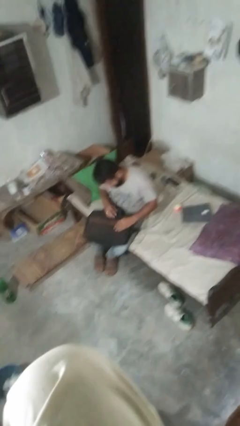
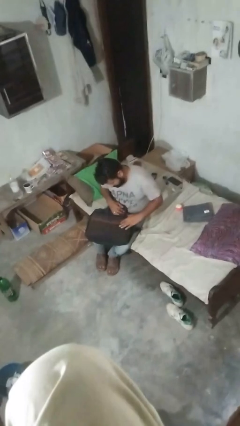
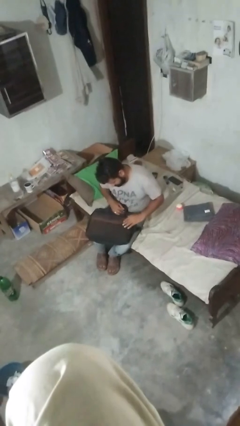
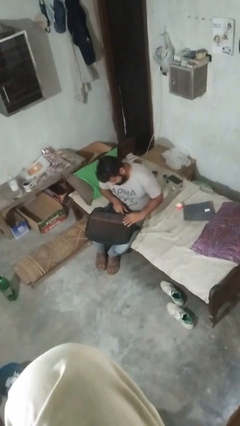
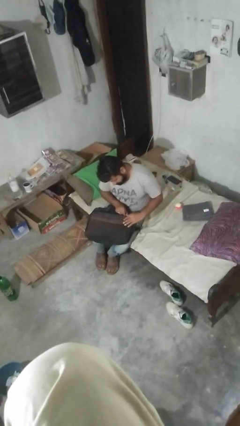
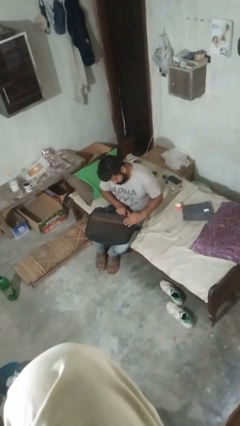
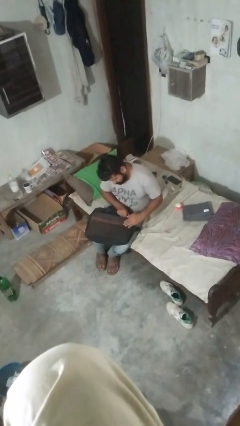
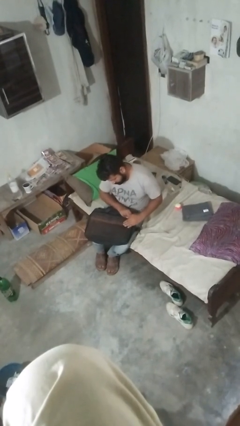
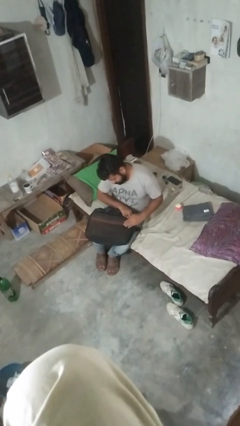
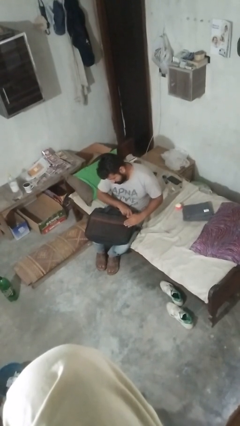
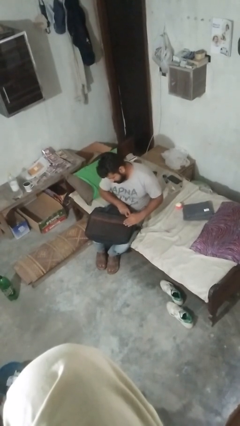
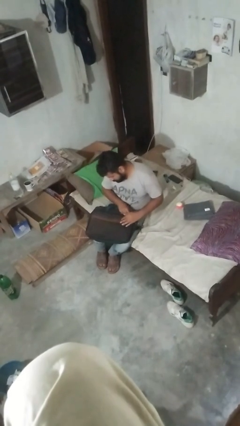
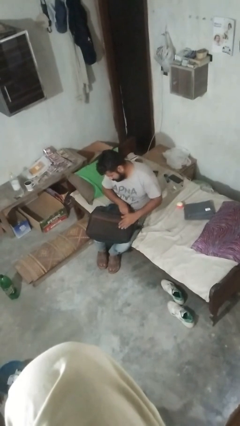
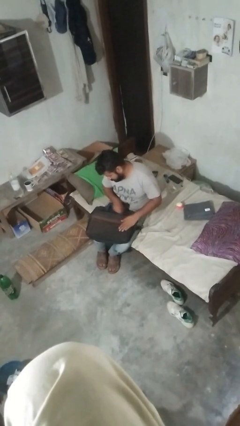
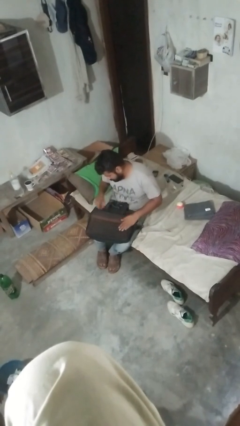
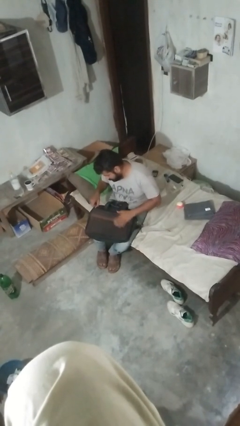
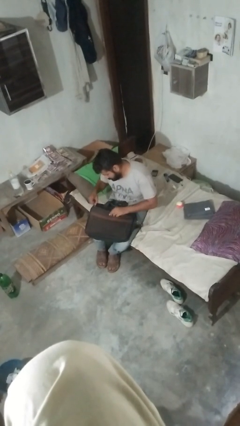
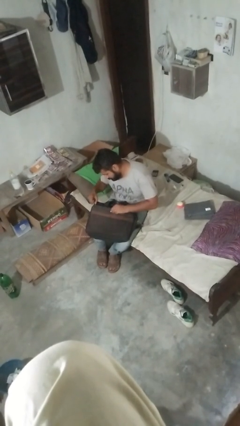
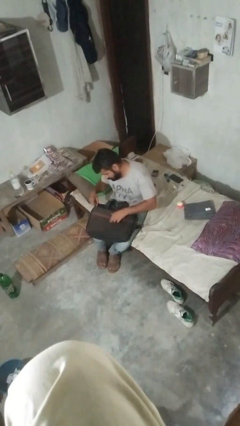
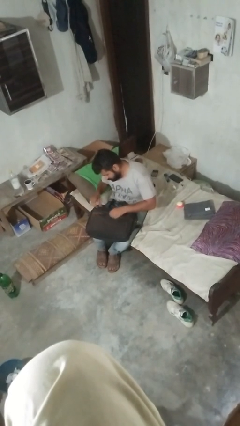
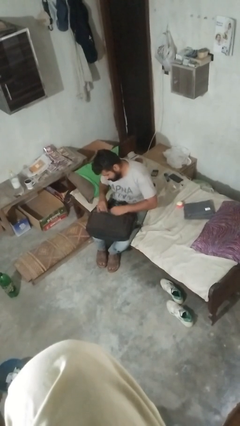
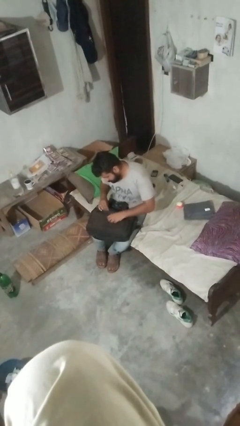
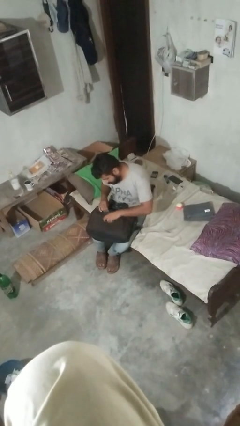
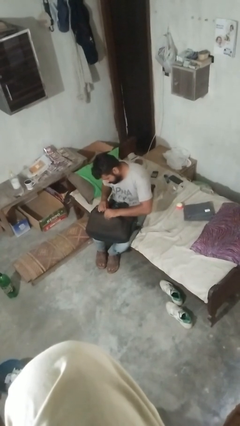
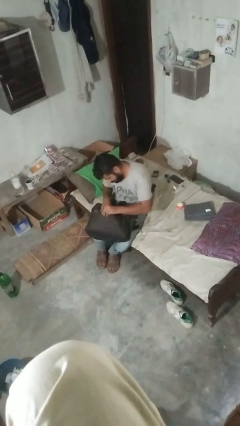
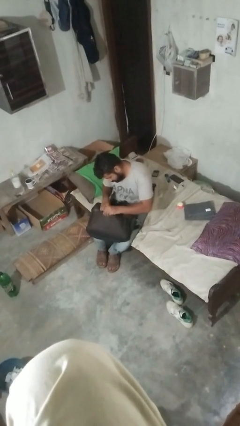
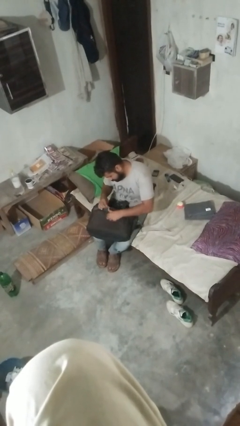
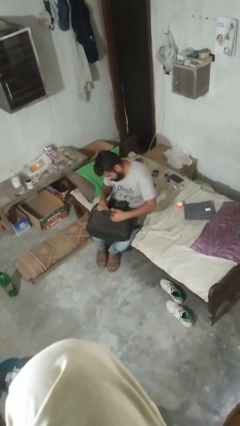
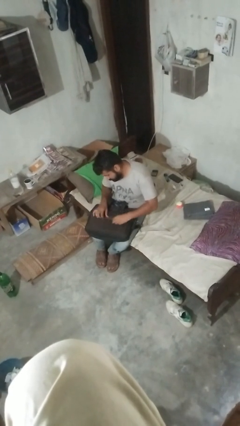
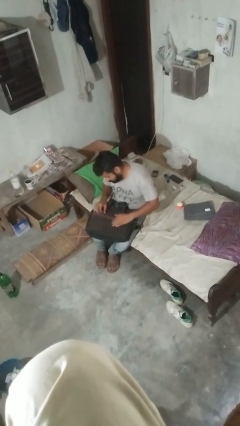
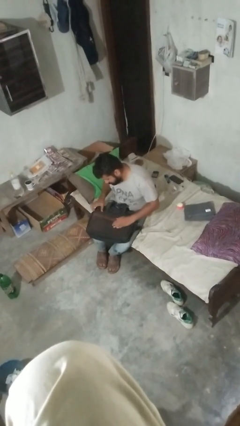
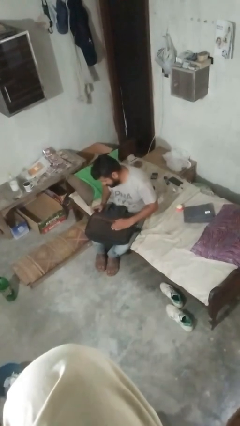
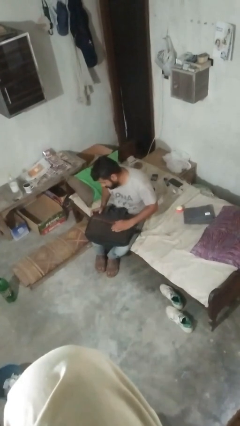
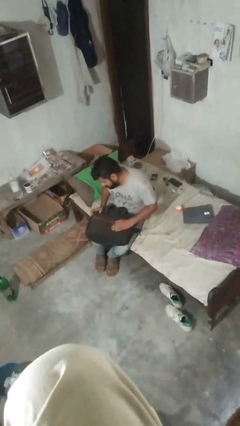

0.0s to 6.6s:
person searches in bag

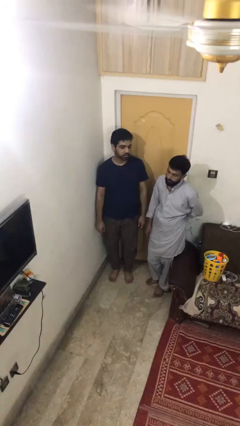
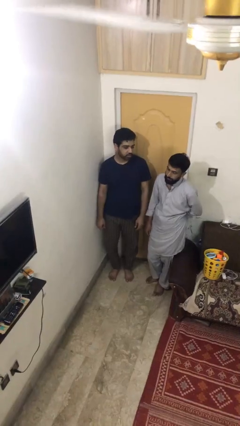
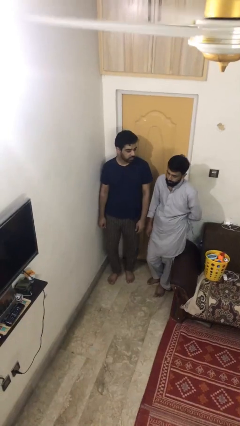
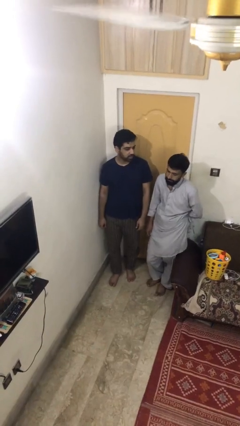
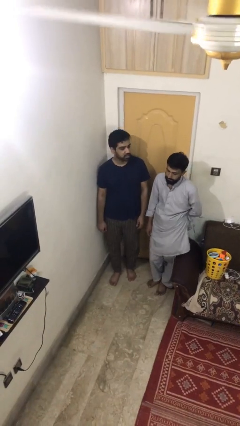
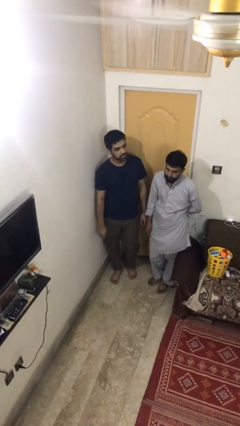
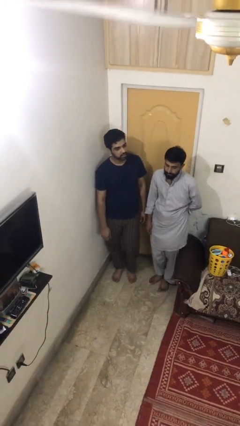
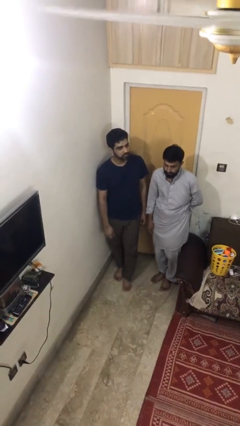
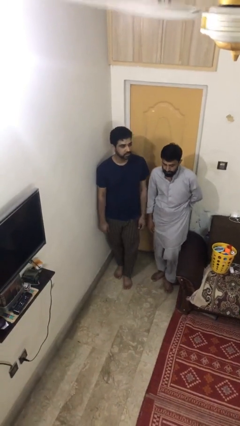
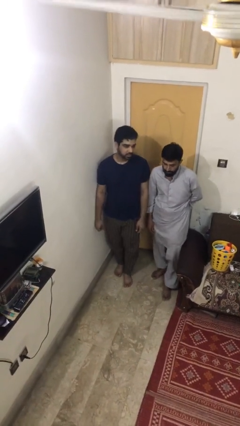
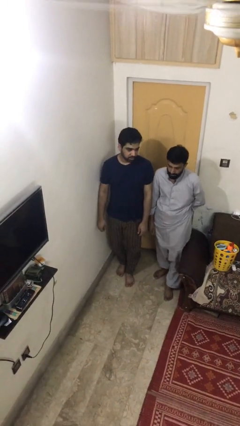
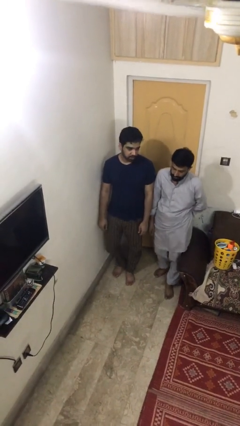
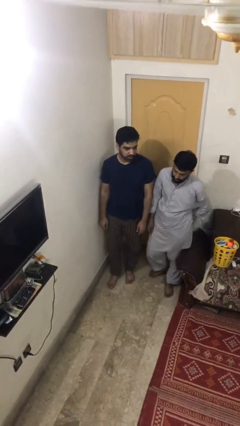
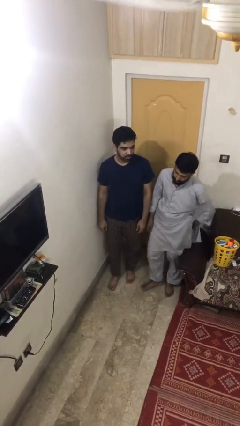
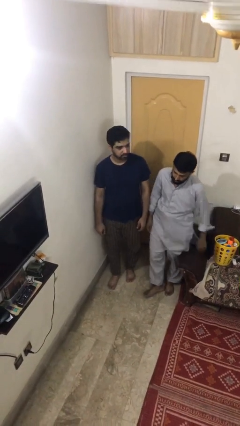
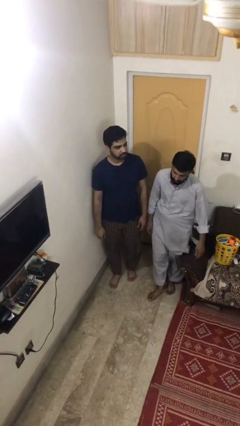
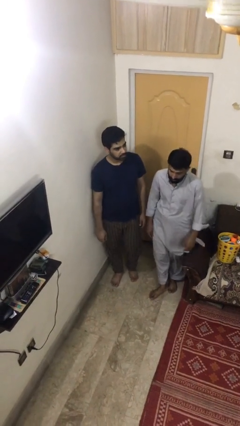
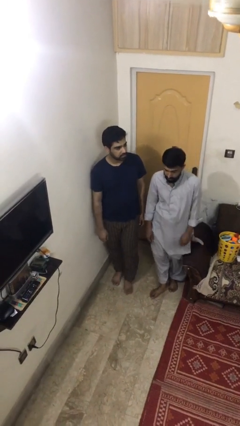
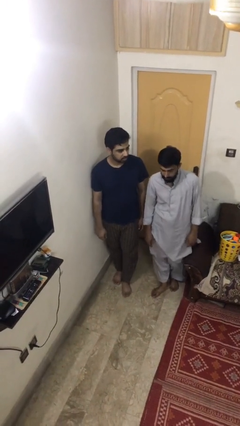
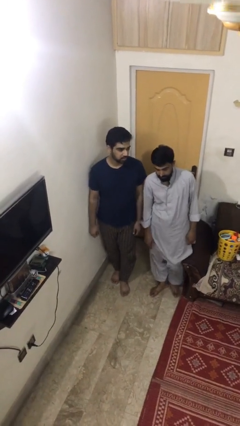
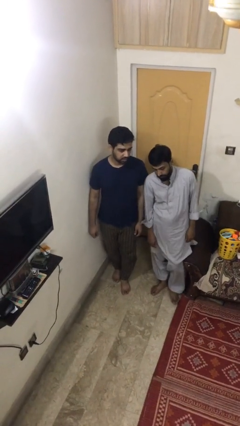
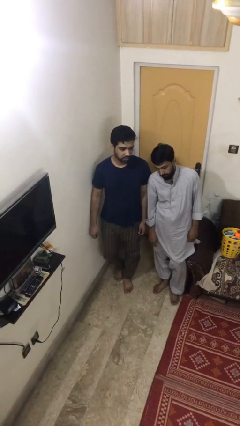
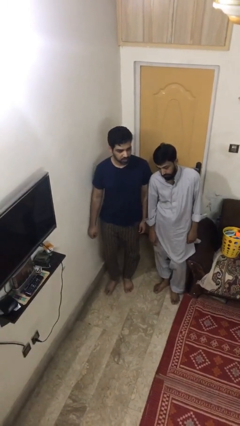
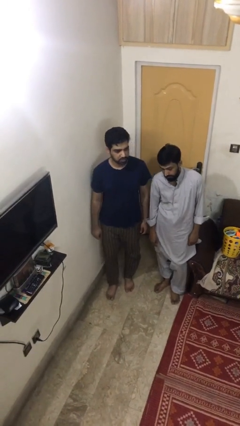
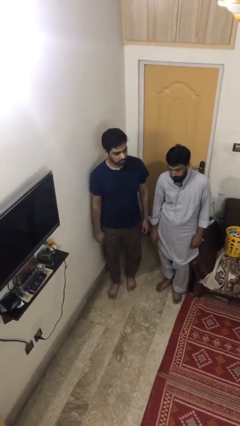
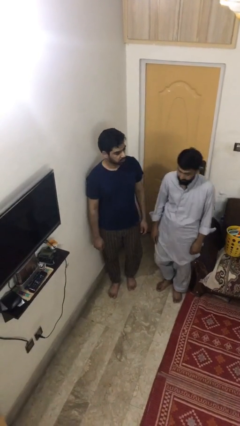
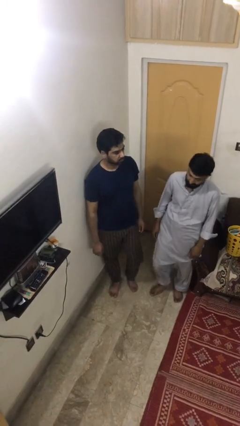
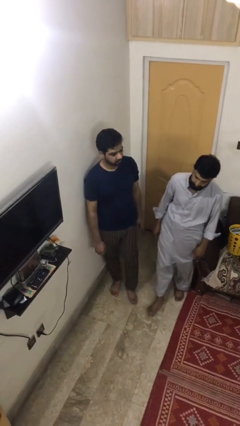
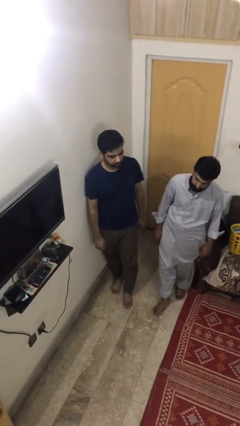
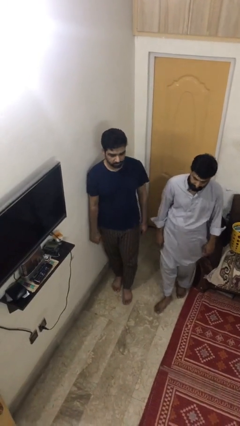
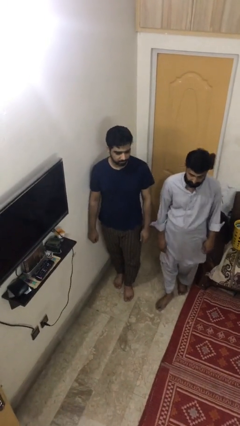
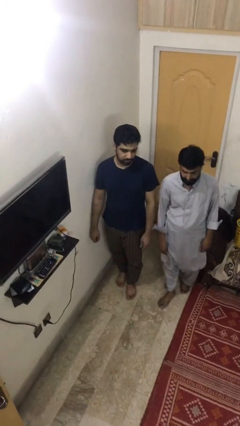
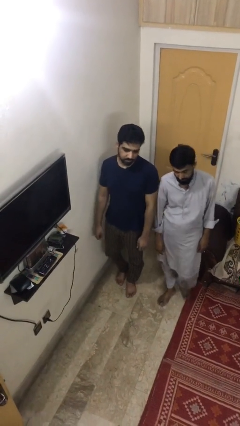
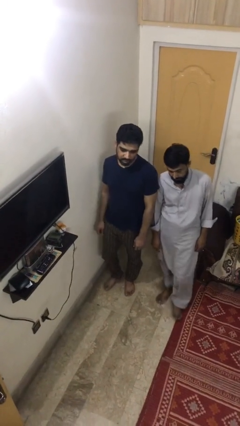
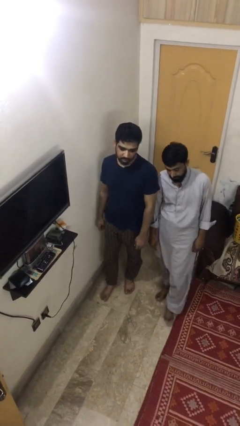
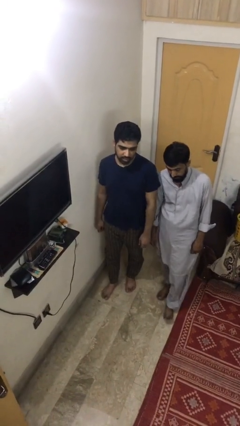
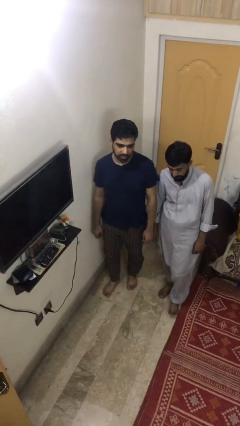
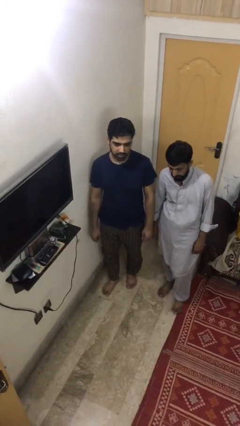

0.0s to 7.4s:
person talks to person

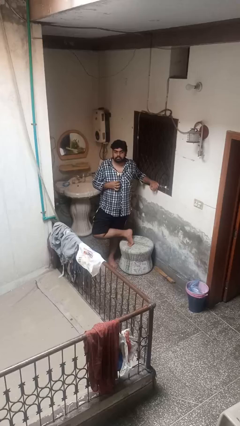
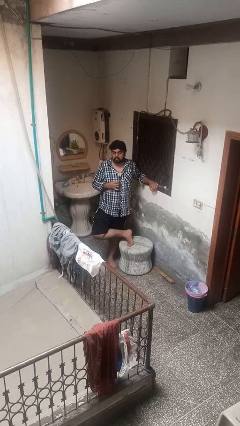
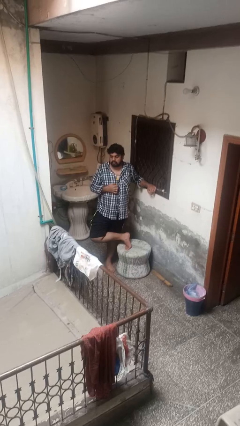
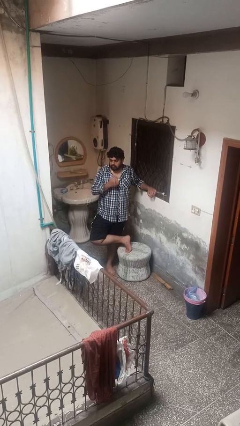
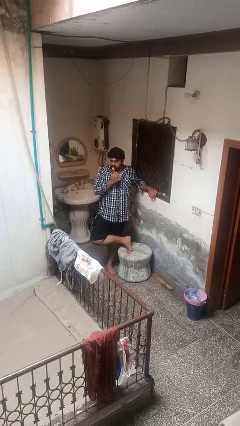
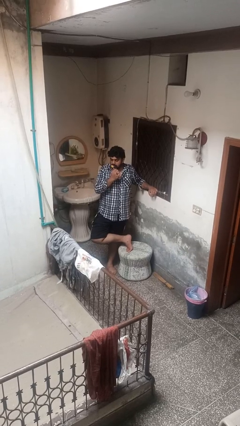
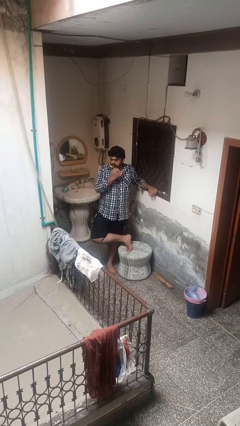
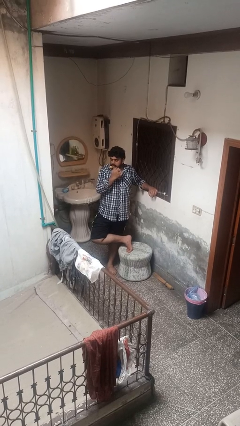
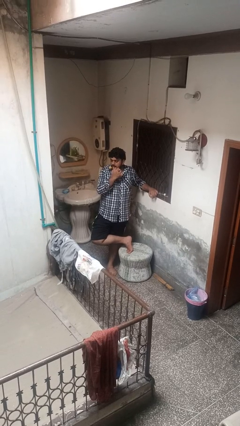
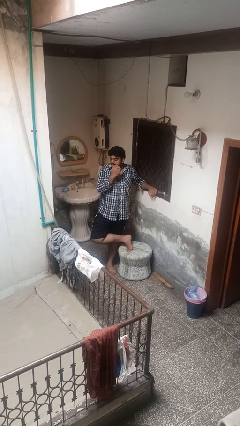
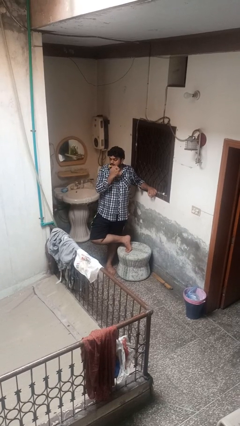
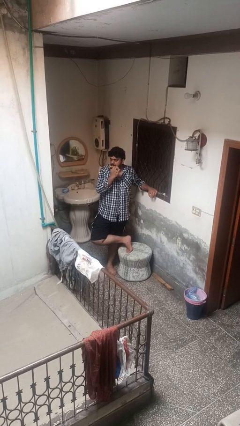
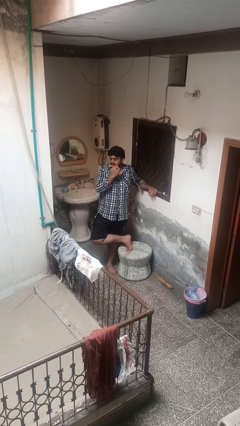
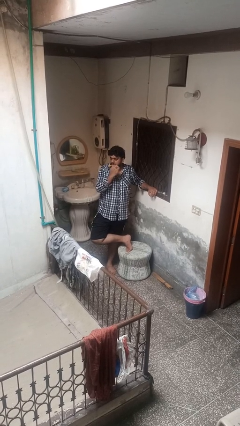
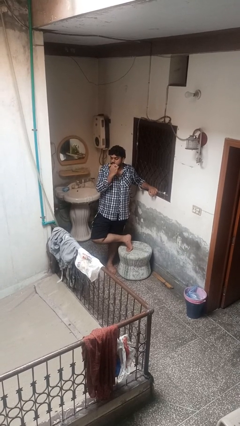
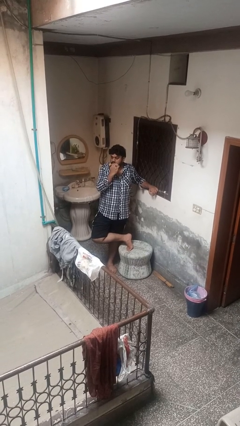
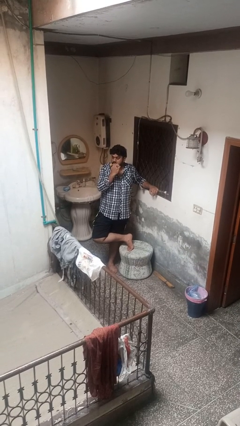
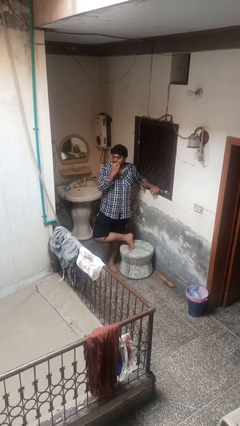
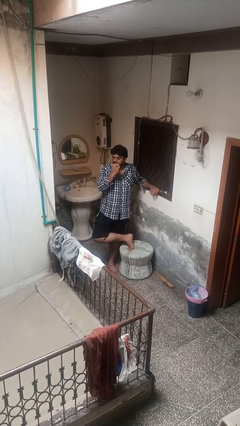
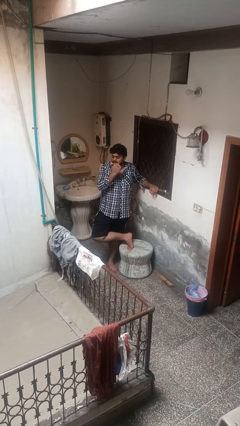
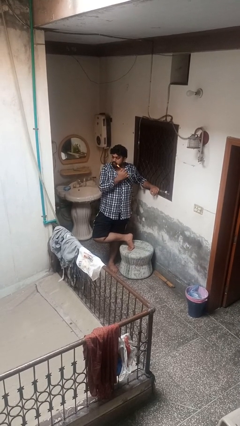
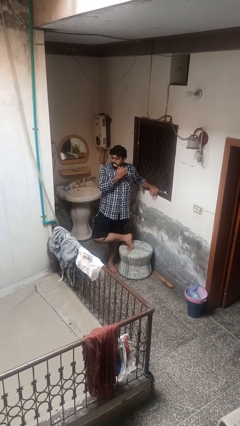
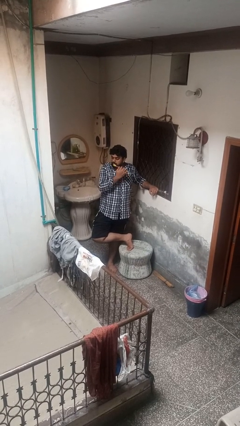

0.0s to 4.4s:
person brushes teeth
